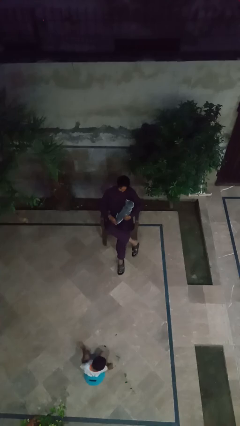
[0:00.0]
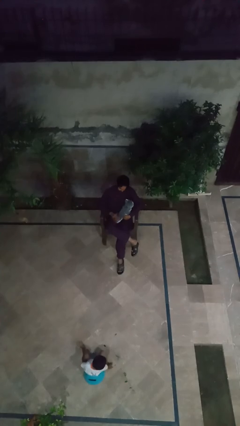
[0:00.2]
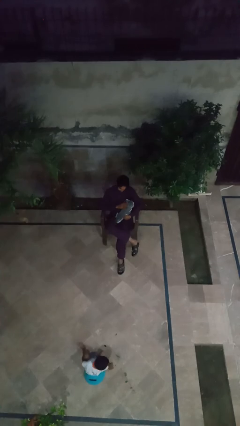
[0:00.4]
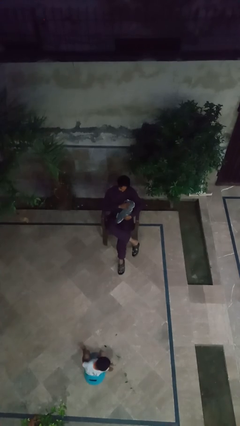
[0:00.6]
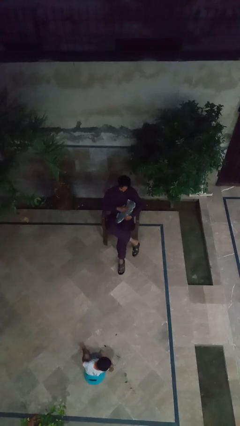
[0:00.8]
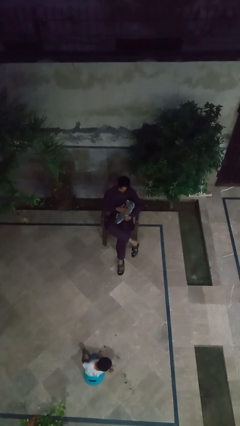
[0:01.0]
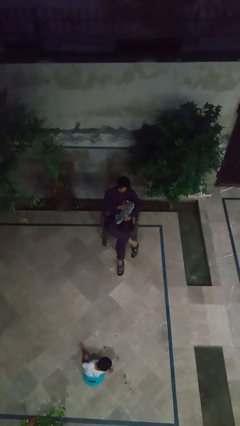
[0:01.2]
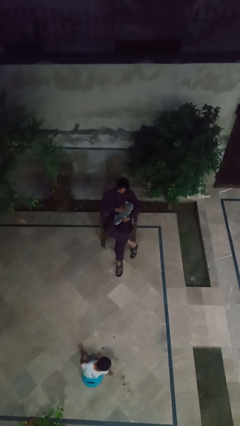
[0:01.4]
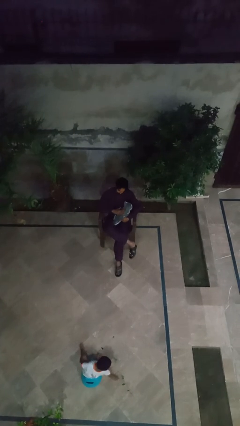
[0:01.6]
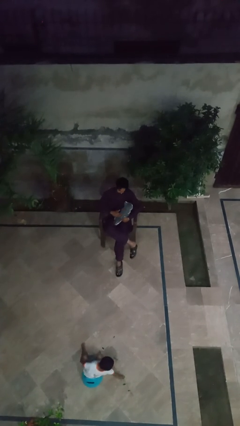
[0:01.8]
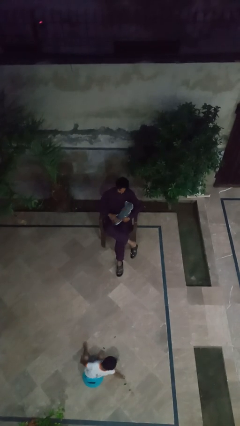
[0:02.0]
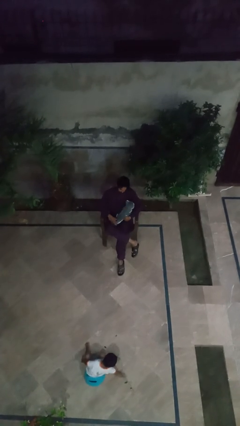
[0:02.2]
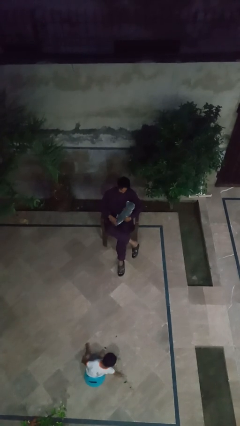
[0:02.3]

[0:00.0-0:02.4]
person pets cat

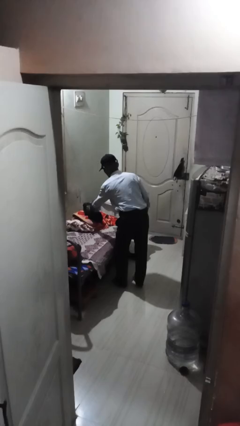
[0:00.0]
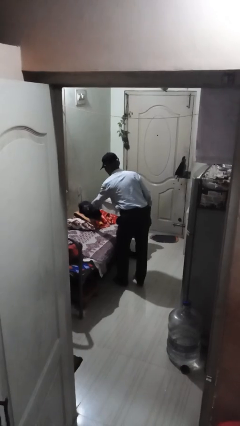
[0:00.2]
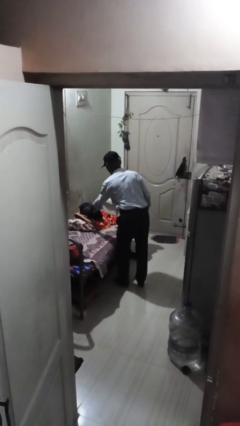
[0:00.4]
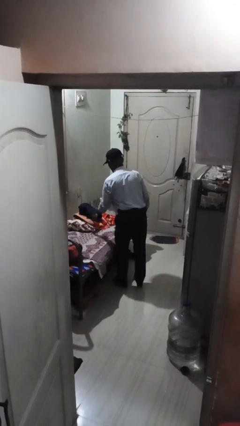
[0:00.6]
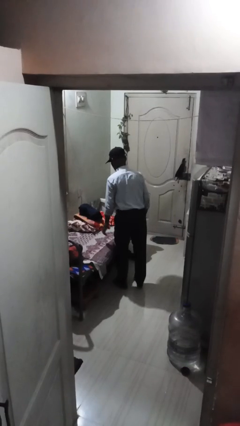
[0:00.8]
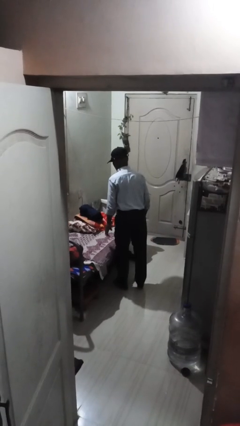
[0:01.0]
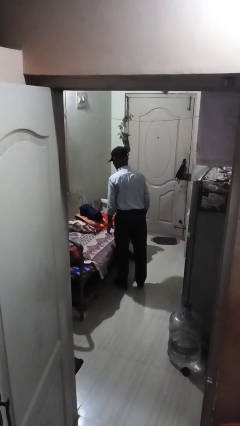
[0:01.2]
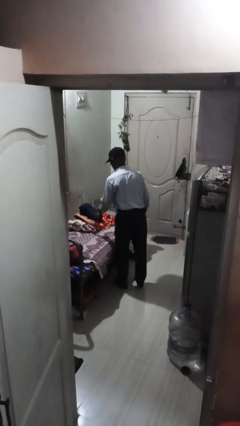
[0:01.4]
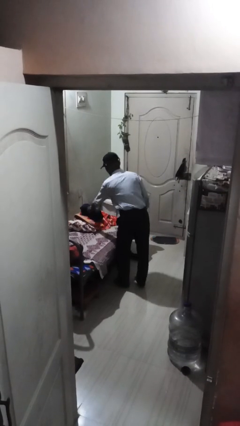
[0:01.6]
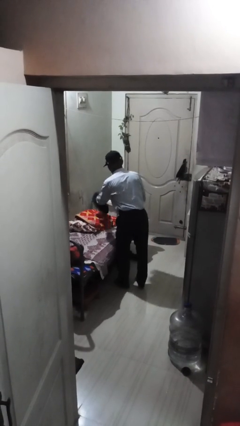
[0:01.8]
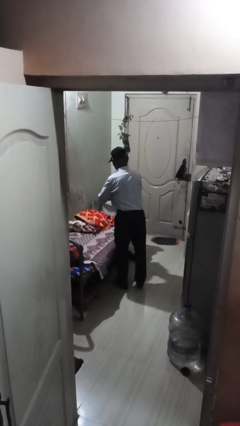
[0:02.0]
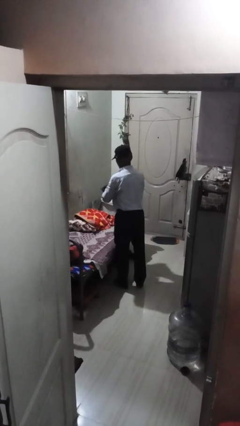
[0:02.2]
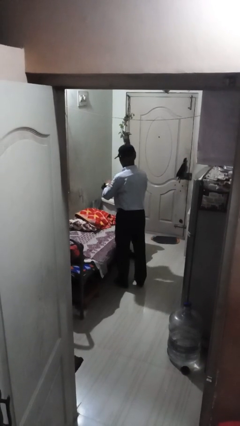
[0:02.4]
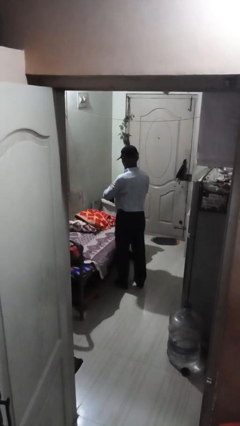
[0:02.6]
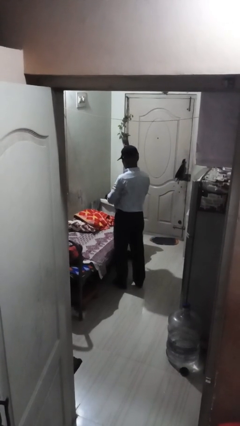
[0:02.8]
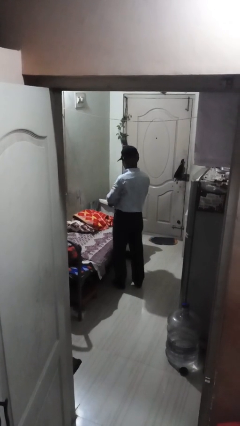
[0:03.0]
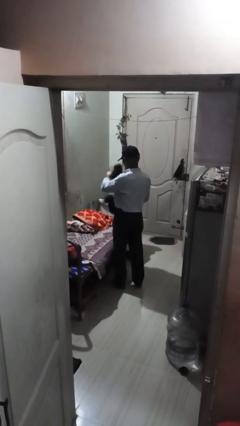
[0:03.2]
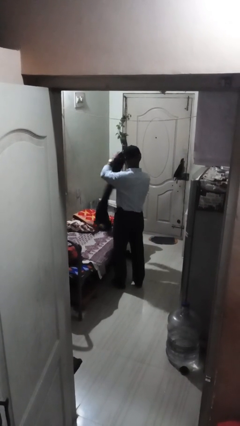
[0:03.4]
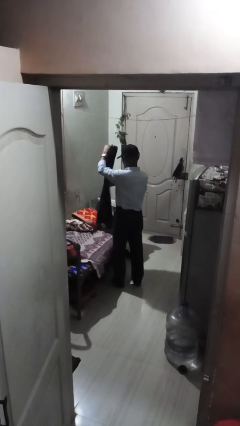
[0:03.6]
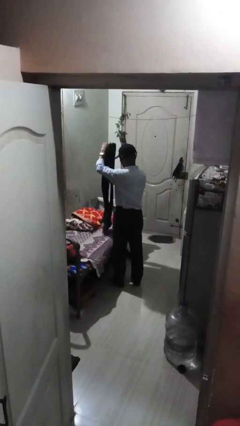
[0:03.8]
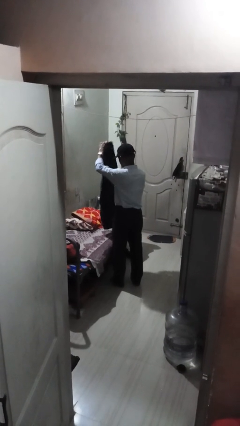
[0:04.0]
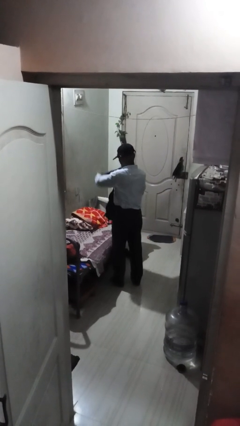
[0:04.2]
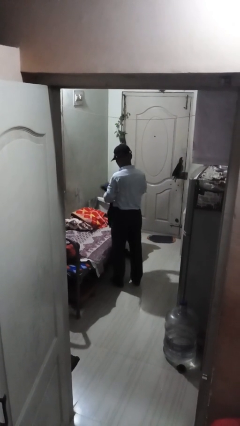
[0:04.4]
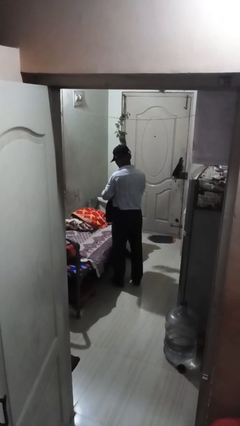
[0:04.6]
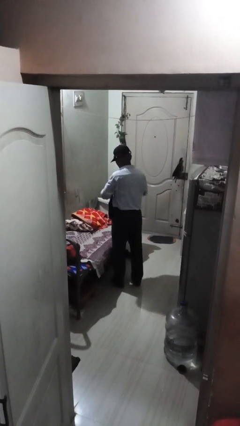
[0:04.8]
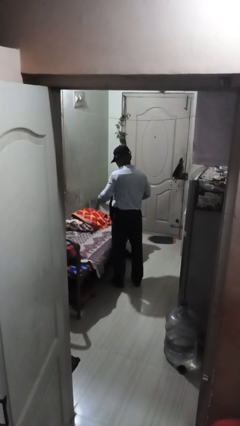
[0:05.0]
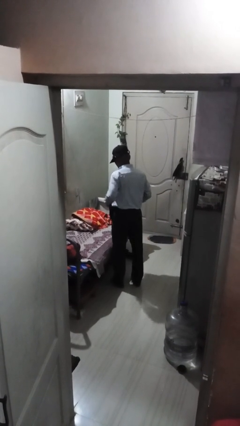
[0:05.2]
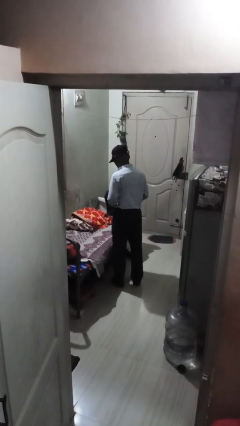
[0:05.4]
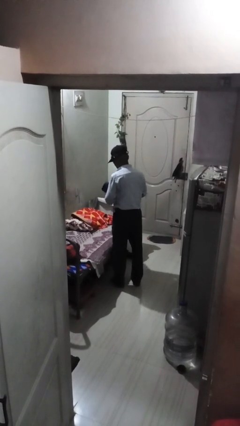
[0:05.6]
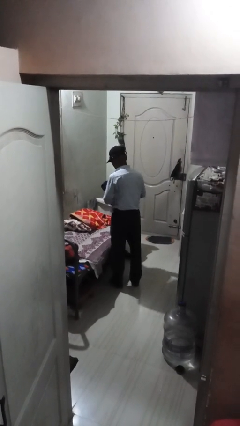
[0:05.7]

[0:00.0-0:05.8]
person folds pants

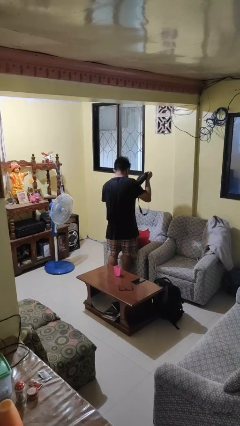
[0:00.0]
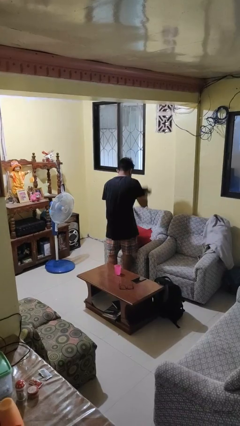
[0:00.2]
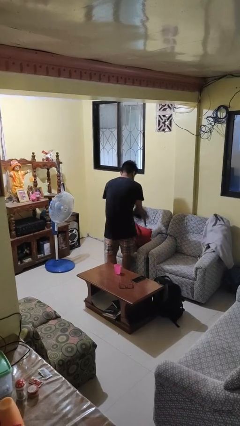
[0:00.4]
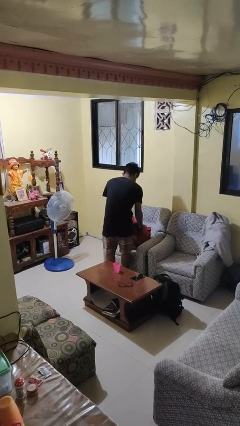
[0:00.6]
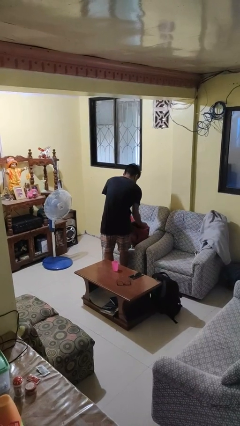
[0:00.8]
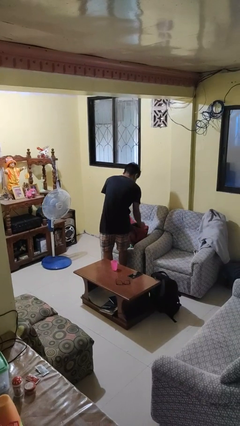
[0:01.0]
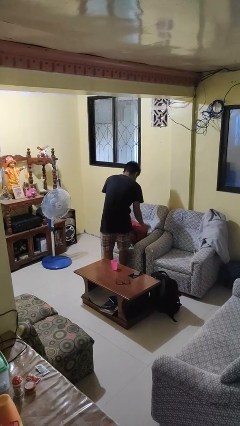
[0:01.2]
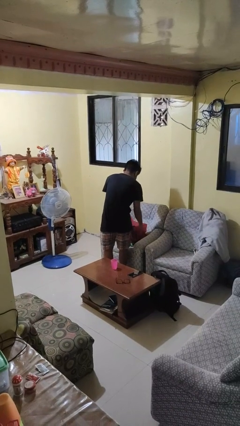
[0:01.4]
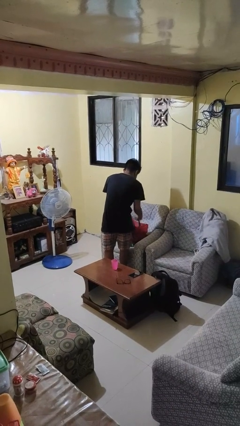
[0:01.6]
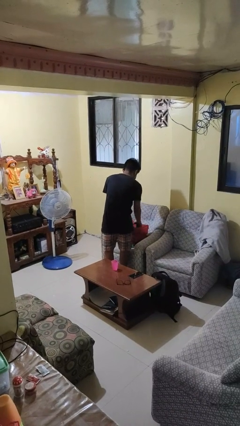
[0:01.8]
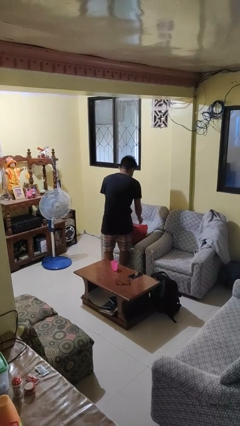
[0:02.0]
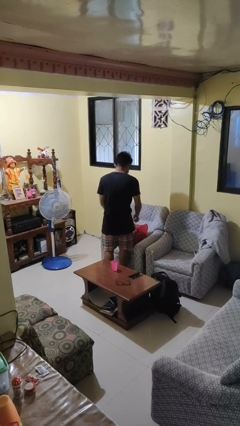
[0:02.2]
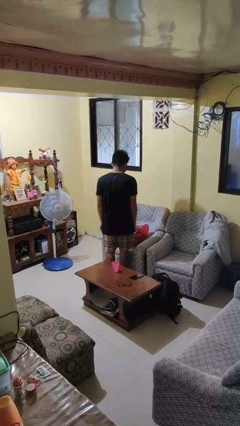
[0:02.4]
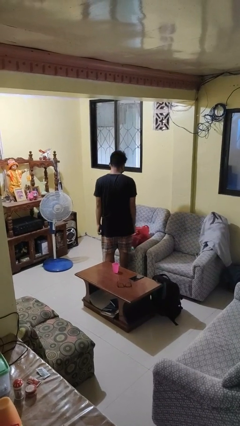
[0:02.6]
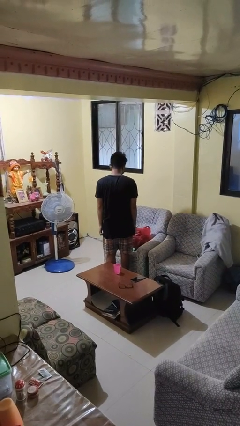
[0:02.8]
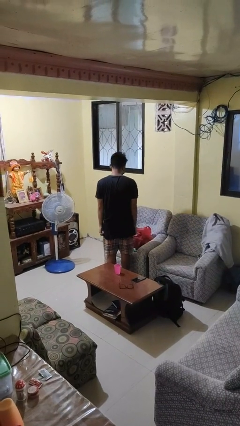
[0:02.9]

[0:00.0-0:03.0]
person puts object into bag

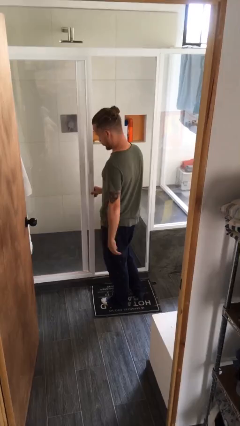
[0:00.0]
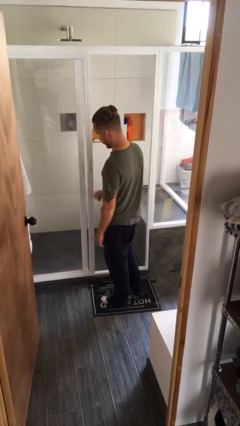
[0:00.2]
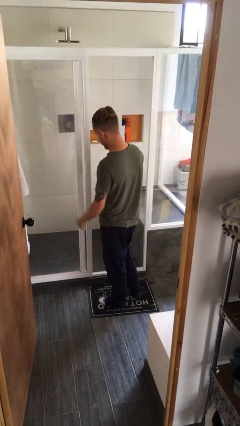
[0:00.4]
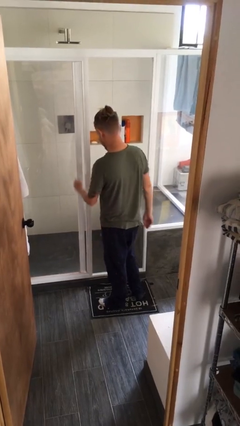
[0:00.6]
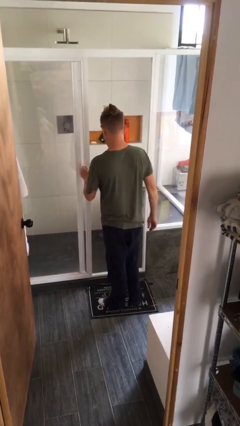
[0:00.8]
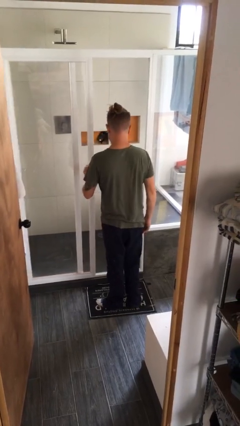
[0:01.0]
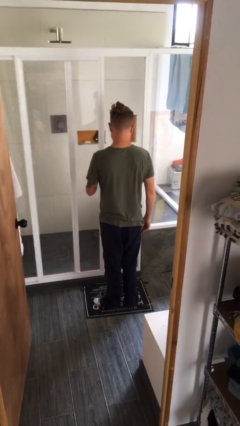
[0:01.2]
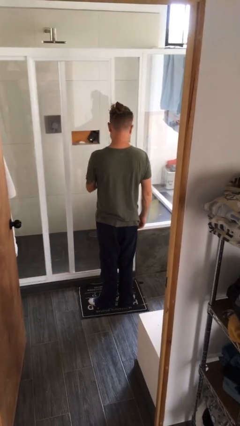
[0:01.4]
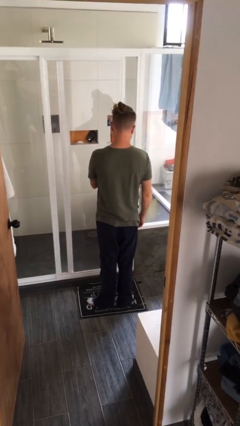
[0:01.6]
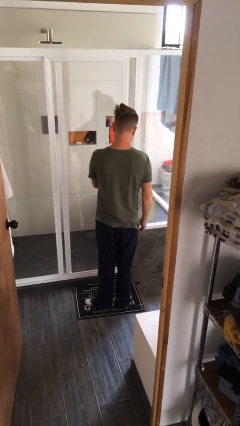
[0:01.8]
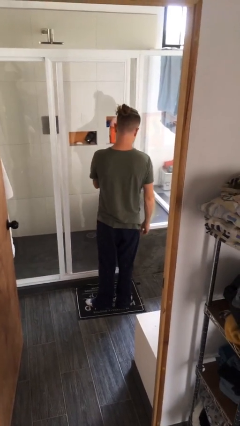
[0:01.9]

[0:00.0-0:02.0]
person closes sliding door

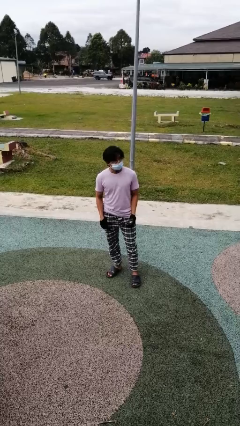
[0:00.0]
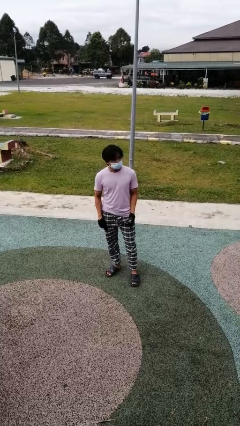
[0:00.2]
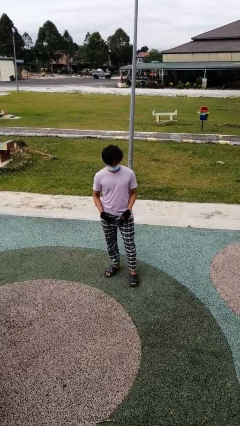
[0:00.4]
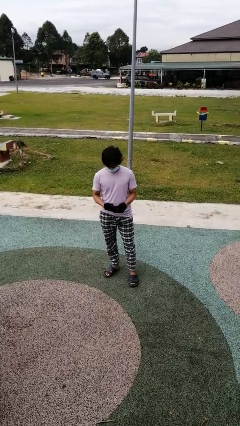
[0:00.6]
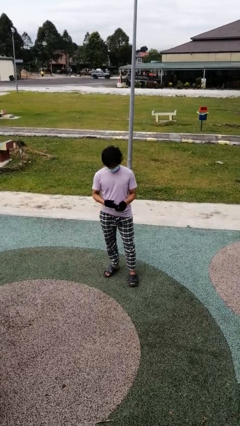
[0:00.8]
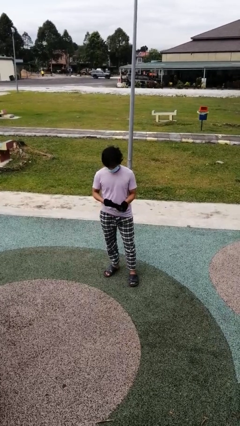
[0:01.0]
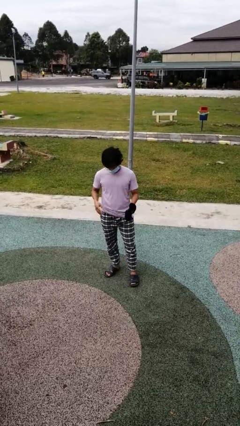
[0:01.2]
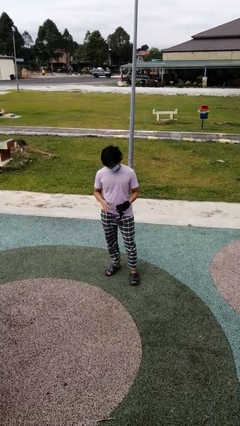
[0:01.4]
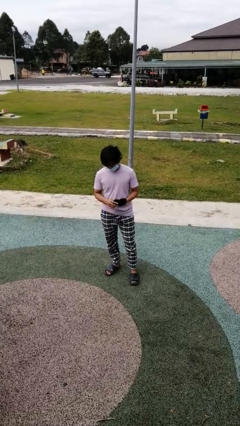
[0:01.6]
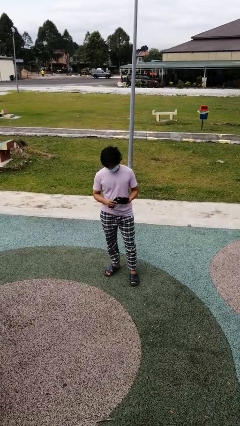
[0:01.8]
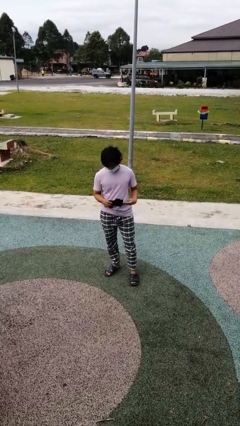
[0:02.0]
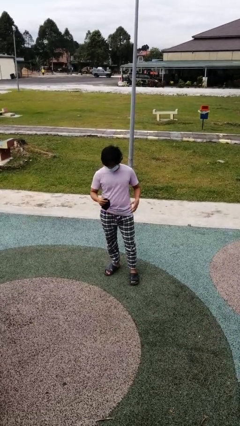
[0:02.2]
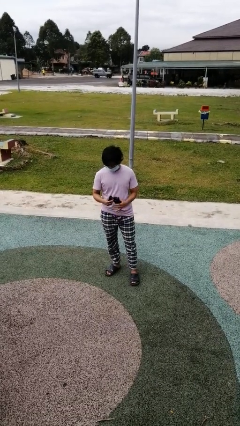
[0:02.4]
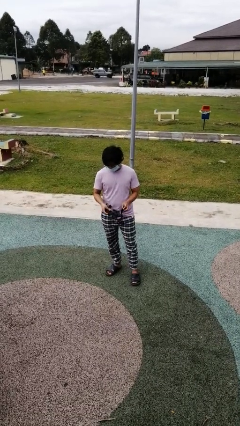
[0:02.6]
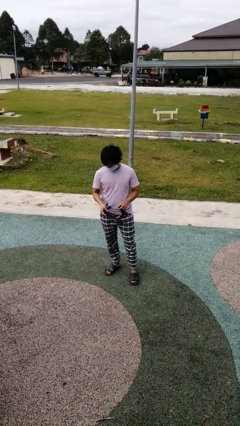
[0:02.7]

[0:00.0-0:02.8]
person takes off gloves

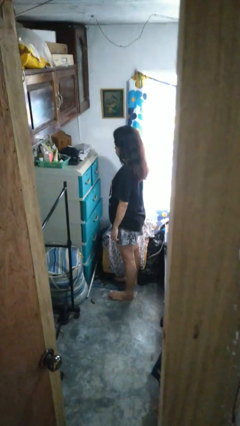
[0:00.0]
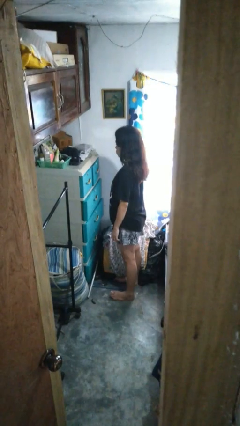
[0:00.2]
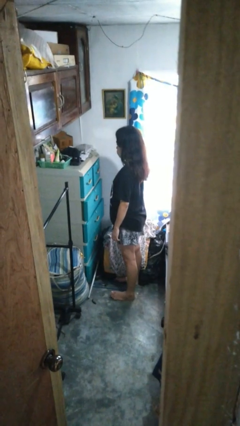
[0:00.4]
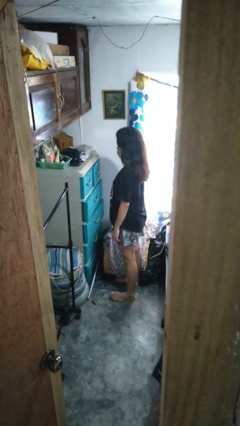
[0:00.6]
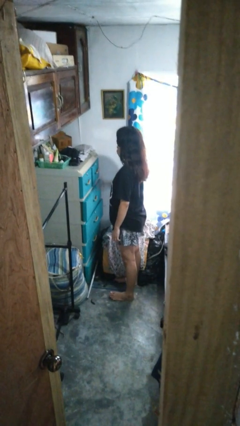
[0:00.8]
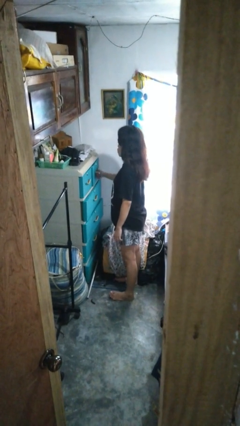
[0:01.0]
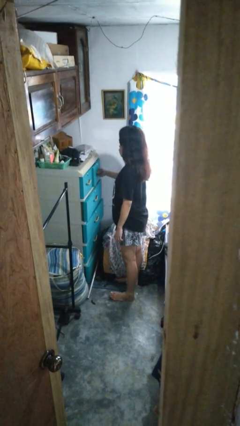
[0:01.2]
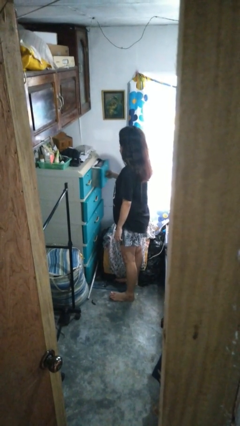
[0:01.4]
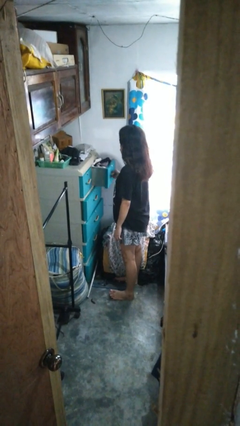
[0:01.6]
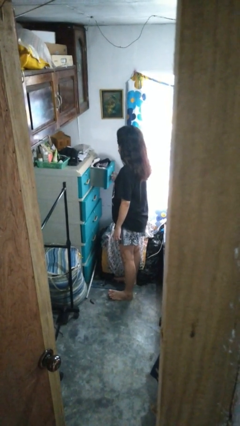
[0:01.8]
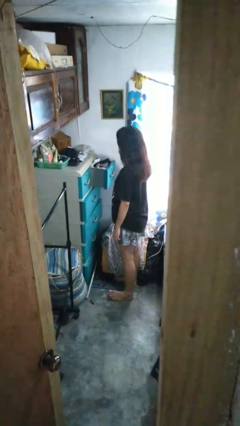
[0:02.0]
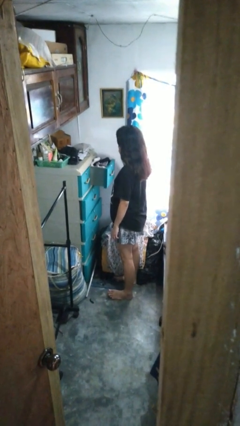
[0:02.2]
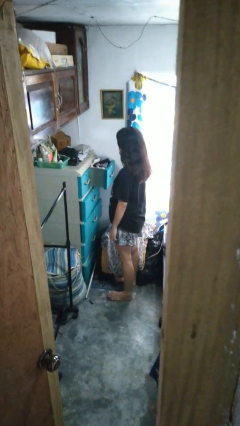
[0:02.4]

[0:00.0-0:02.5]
person opens dresser drawer
